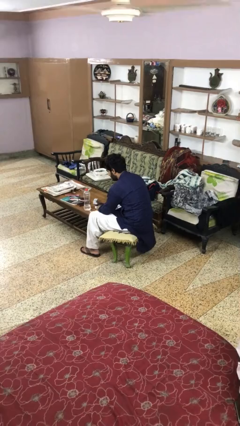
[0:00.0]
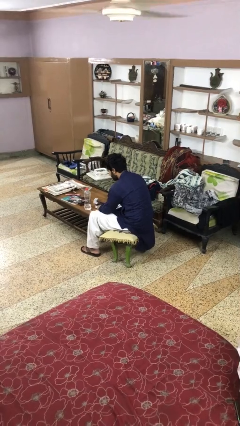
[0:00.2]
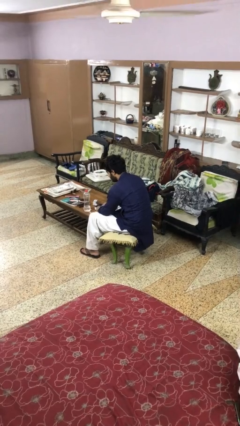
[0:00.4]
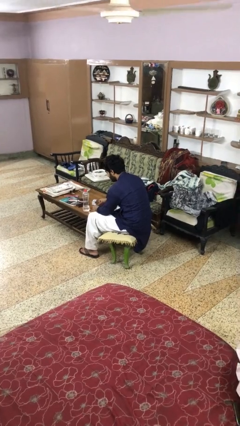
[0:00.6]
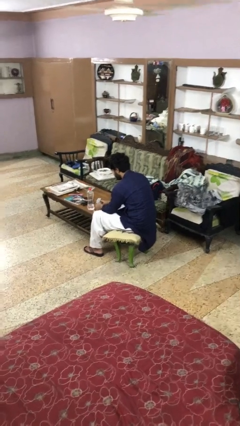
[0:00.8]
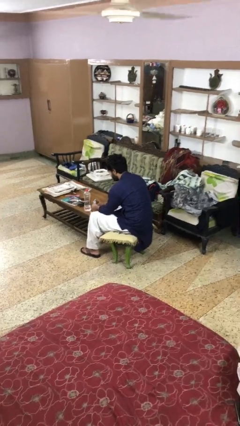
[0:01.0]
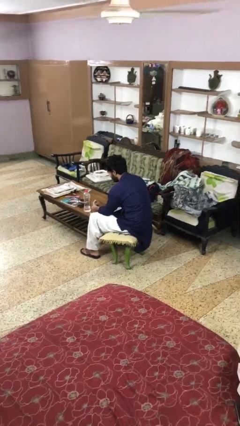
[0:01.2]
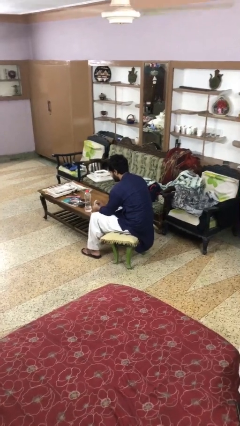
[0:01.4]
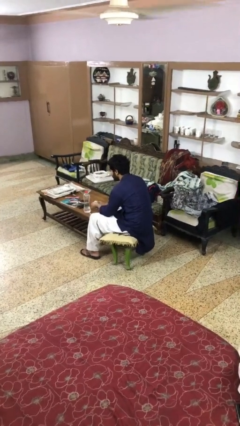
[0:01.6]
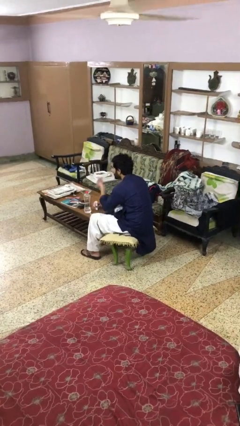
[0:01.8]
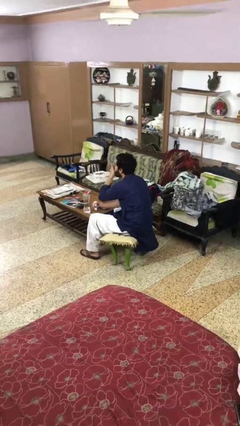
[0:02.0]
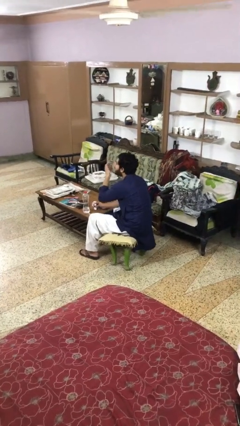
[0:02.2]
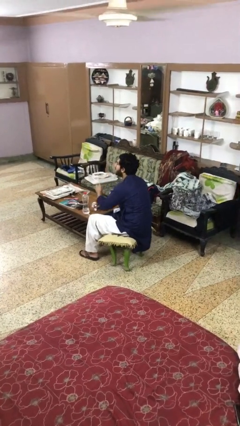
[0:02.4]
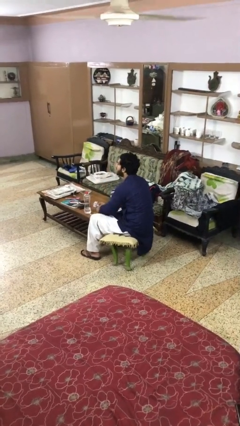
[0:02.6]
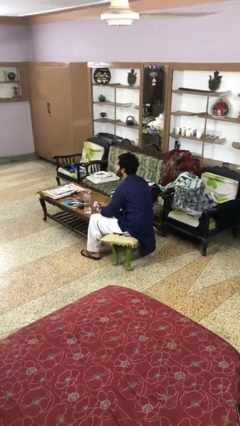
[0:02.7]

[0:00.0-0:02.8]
person takes medicine pills

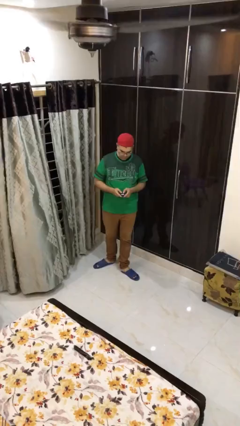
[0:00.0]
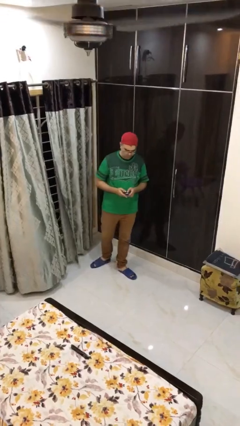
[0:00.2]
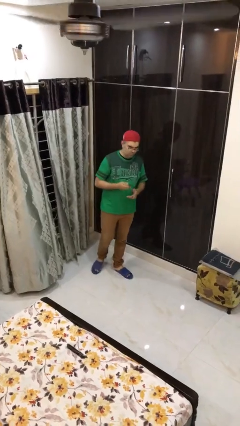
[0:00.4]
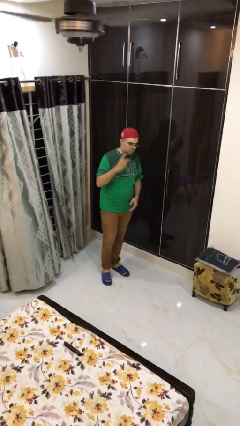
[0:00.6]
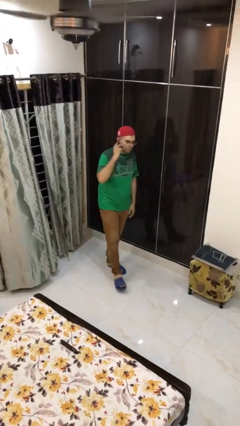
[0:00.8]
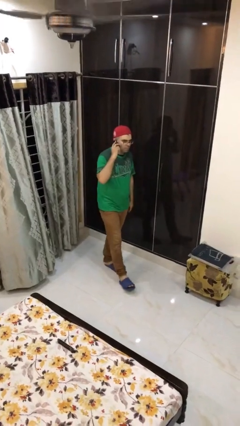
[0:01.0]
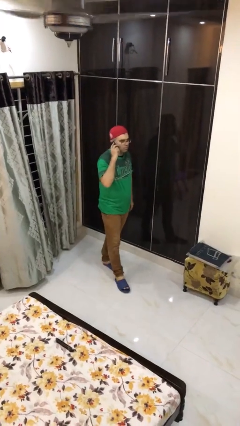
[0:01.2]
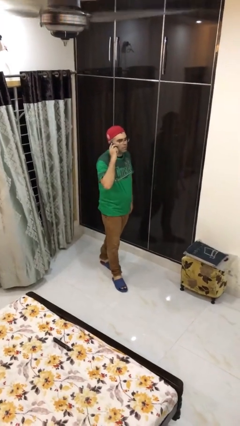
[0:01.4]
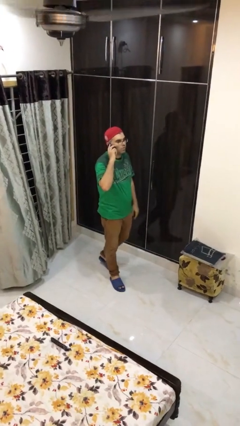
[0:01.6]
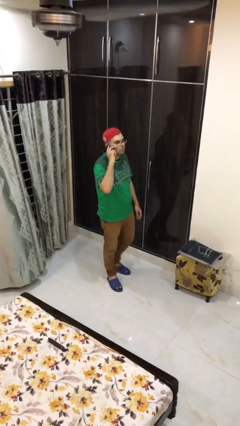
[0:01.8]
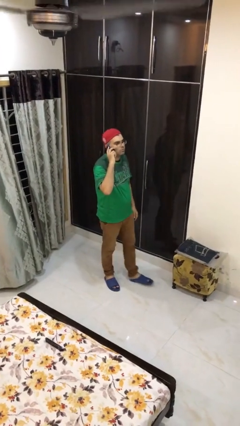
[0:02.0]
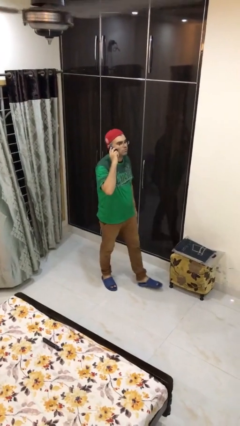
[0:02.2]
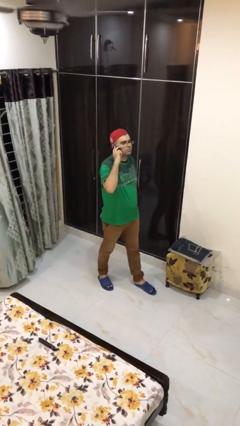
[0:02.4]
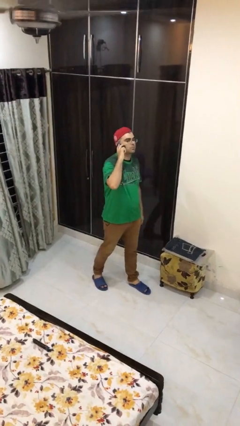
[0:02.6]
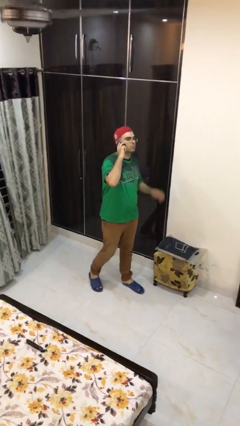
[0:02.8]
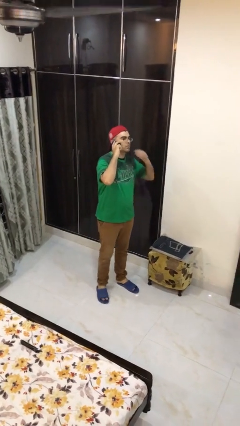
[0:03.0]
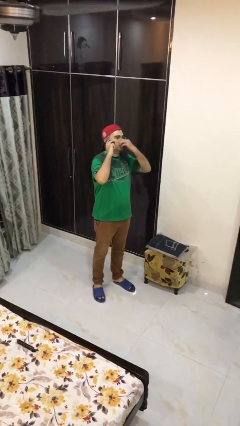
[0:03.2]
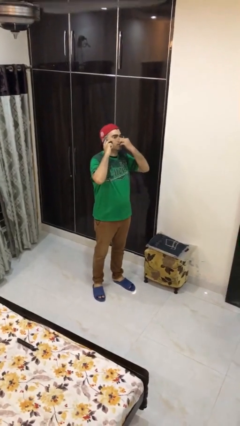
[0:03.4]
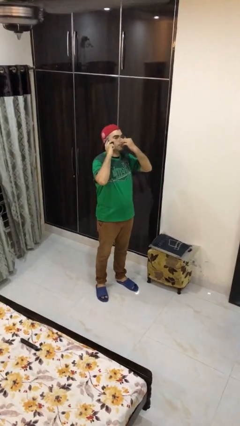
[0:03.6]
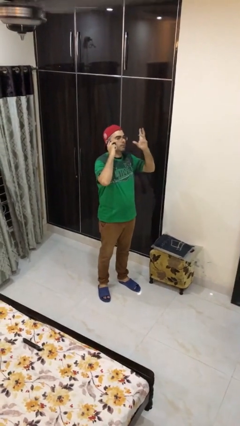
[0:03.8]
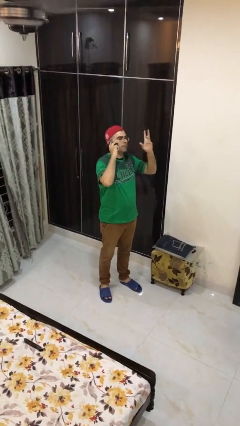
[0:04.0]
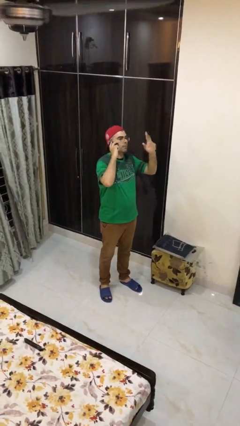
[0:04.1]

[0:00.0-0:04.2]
person talks on phone

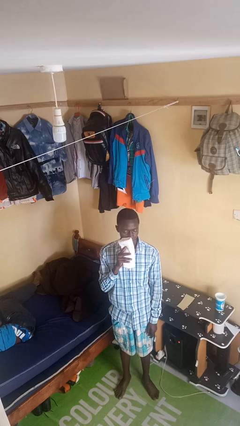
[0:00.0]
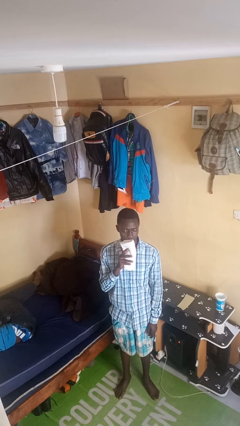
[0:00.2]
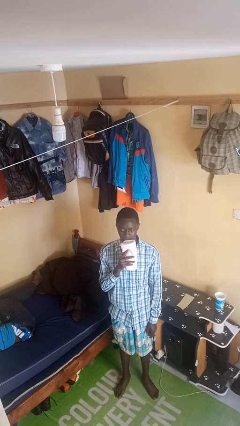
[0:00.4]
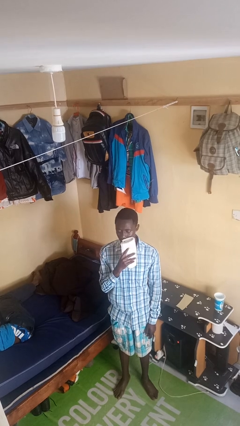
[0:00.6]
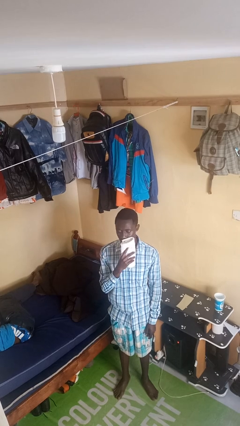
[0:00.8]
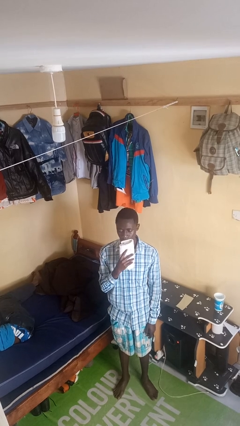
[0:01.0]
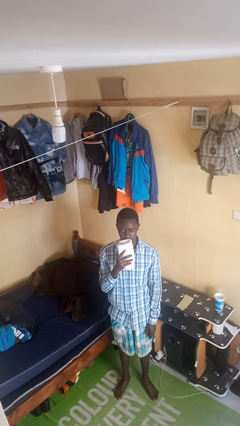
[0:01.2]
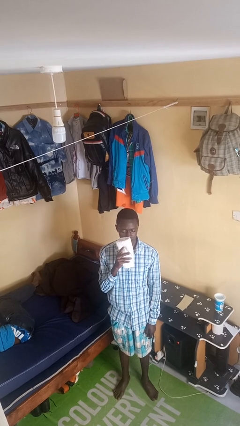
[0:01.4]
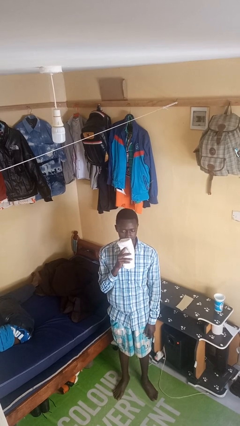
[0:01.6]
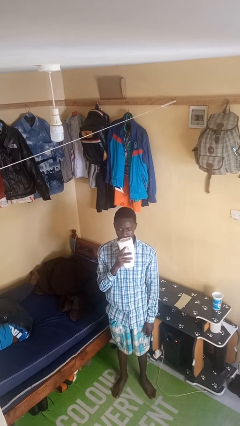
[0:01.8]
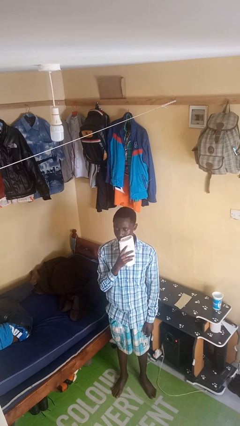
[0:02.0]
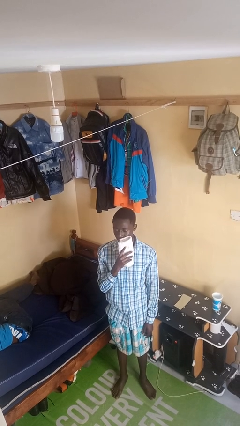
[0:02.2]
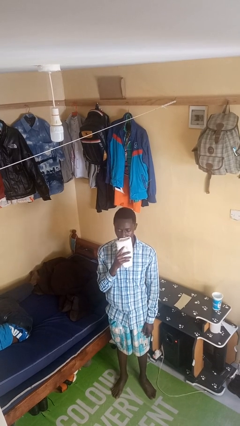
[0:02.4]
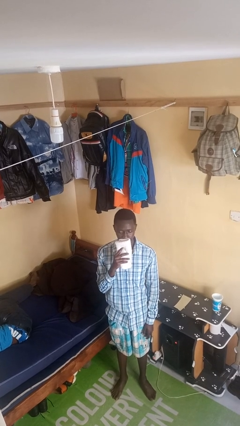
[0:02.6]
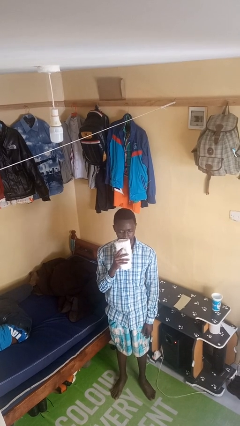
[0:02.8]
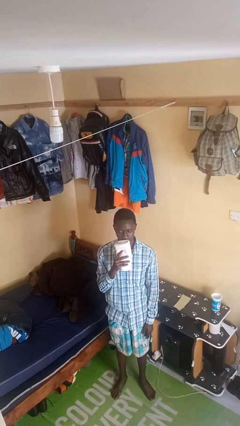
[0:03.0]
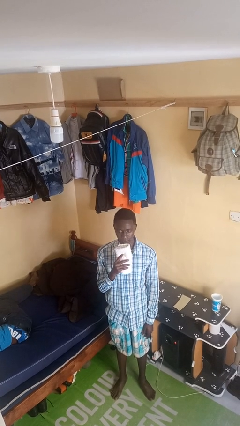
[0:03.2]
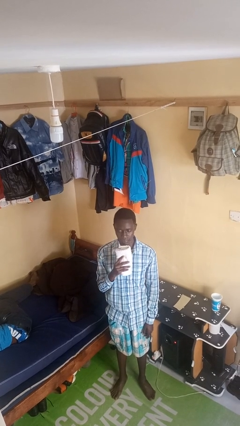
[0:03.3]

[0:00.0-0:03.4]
person wipes mouth with napkin

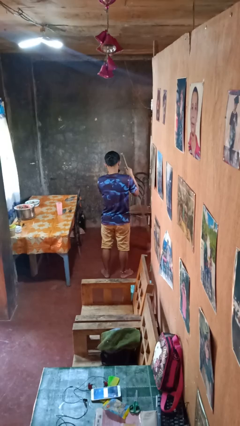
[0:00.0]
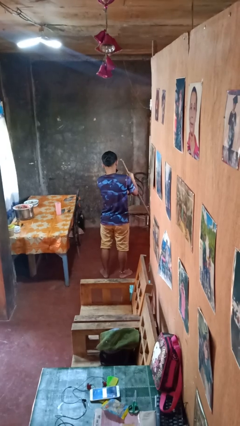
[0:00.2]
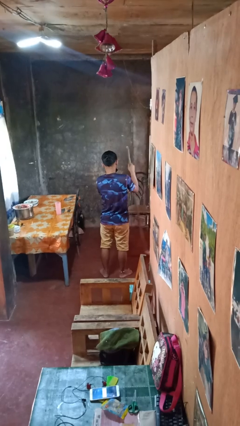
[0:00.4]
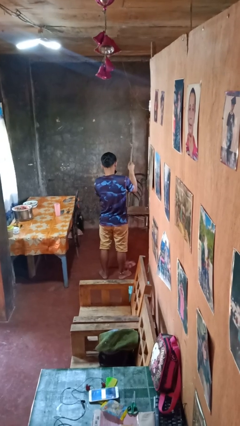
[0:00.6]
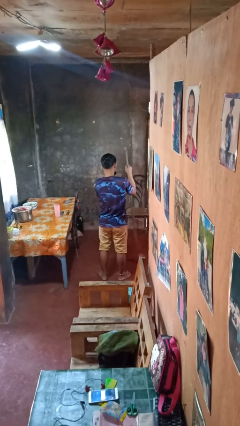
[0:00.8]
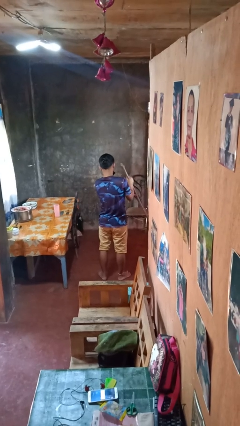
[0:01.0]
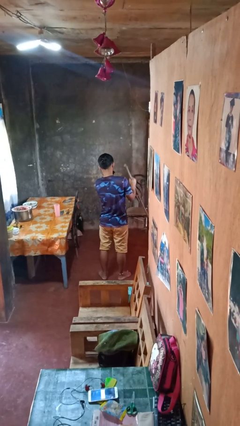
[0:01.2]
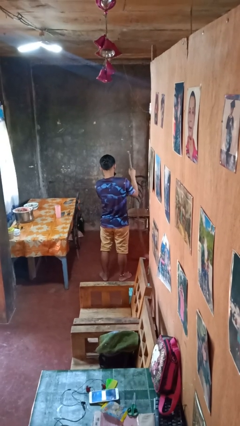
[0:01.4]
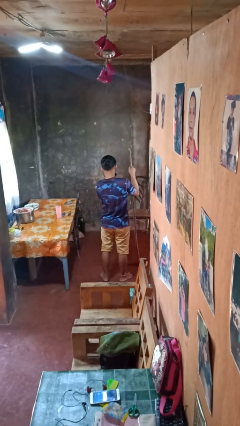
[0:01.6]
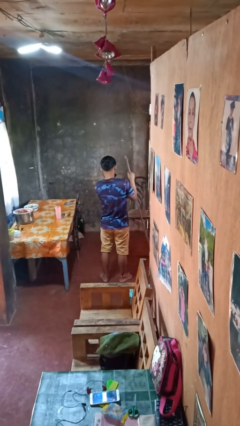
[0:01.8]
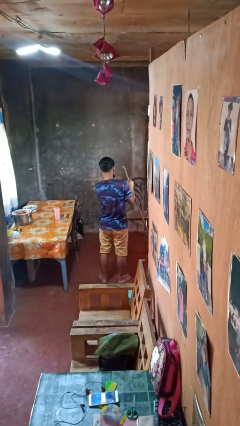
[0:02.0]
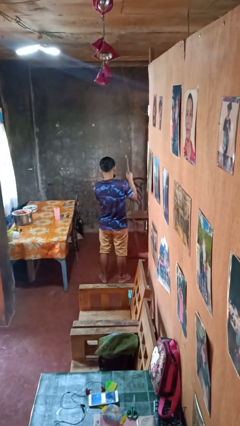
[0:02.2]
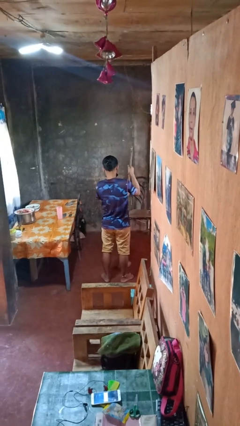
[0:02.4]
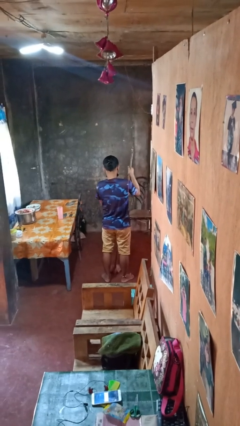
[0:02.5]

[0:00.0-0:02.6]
person mops

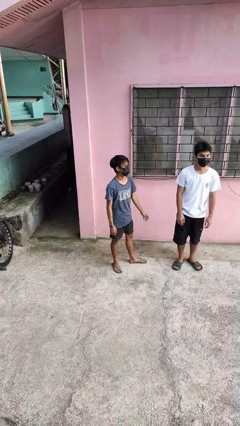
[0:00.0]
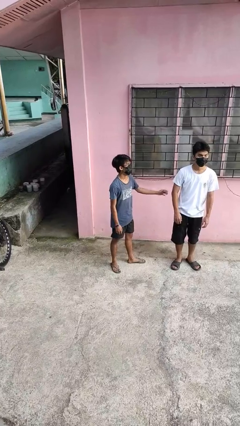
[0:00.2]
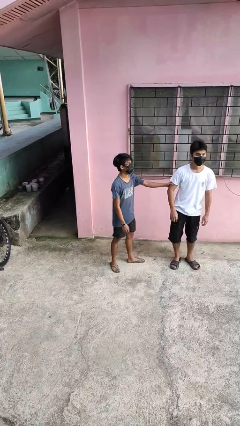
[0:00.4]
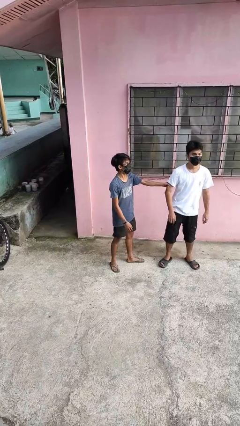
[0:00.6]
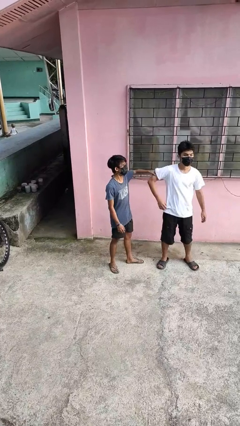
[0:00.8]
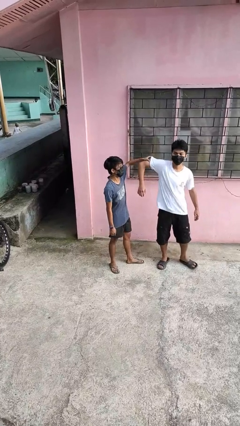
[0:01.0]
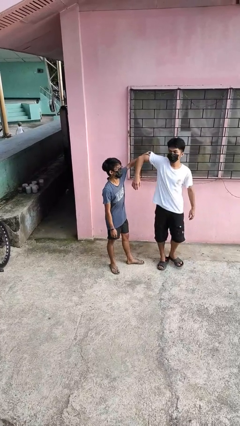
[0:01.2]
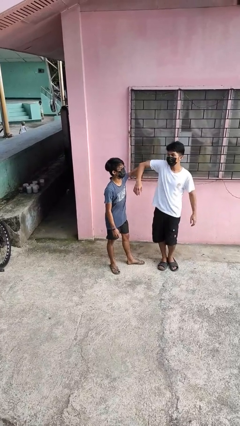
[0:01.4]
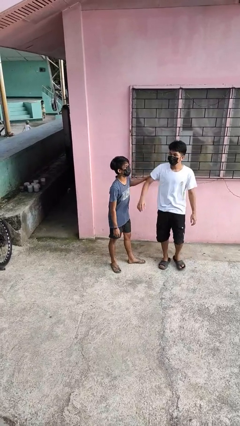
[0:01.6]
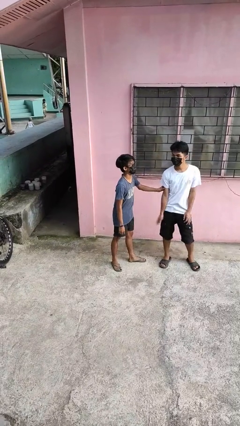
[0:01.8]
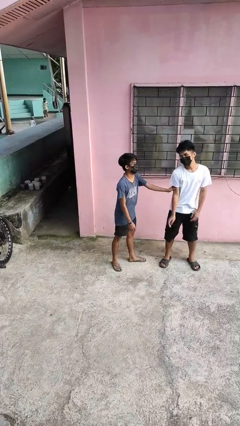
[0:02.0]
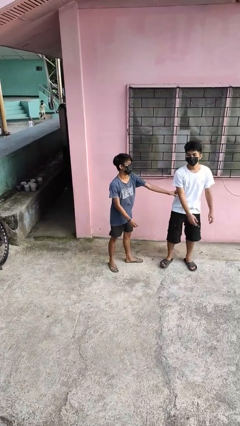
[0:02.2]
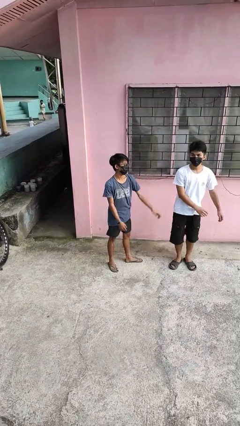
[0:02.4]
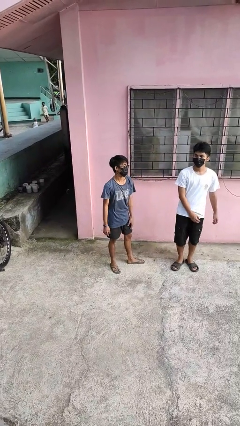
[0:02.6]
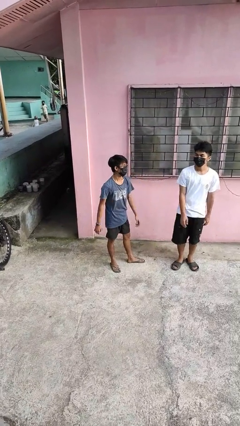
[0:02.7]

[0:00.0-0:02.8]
person grabs person by bicep

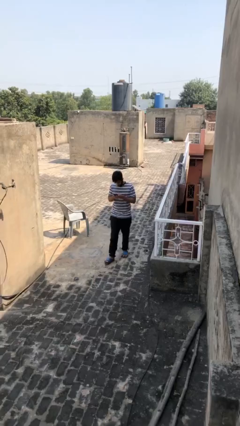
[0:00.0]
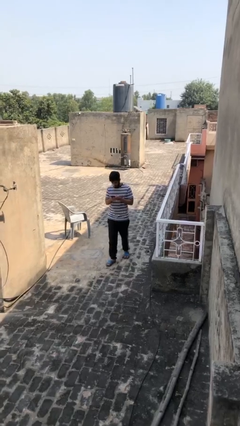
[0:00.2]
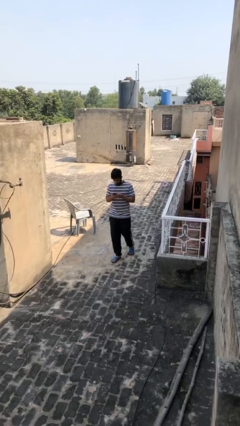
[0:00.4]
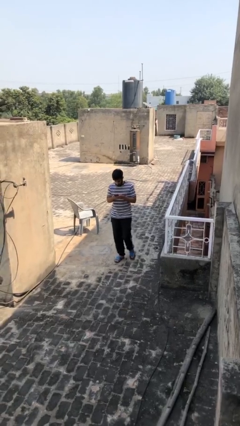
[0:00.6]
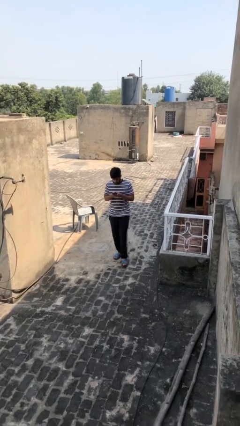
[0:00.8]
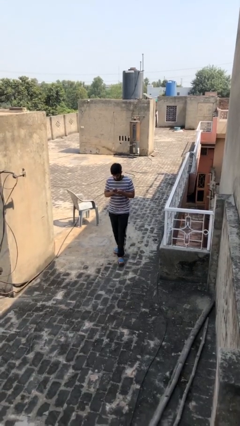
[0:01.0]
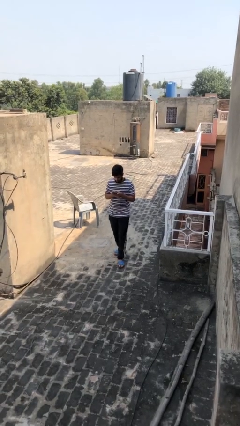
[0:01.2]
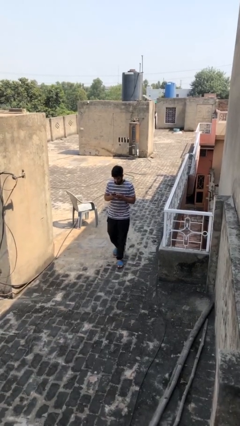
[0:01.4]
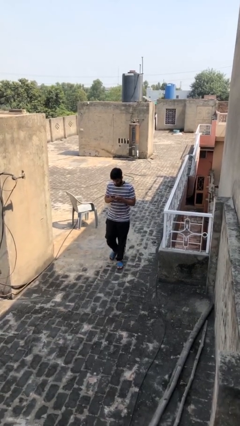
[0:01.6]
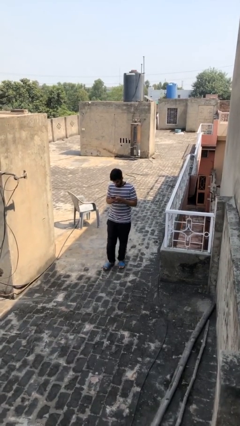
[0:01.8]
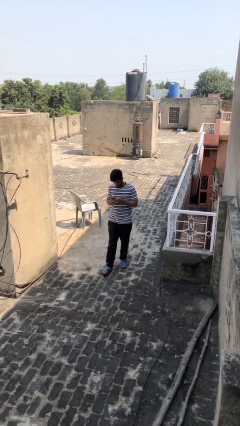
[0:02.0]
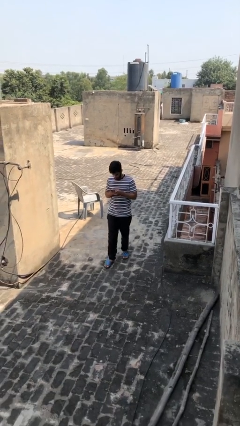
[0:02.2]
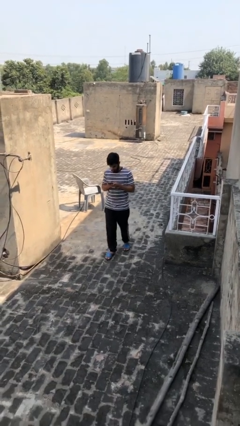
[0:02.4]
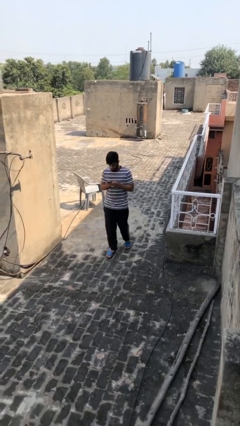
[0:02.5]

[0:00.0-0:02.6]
person texts on phone
